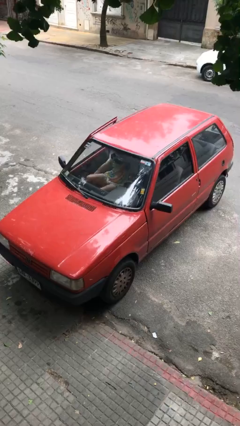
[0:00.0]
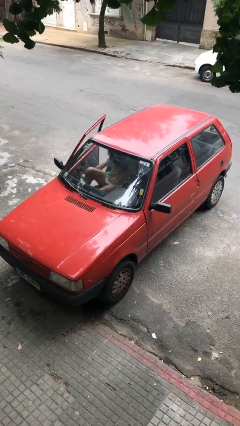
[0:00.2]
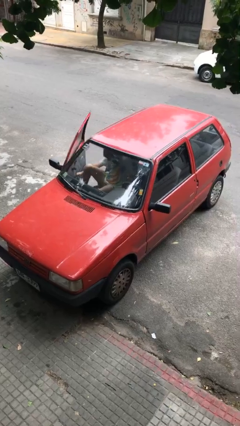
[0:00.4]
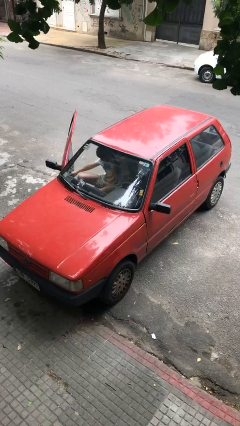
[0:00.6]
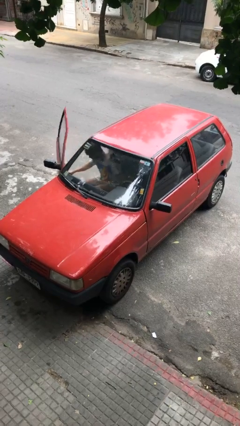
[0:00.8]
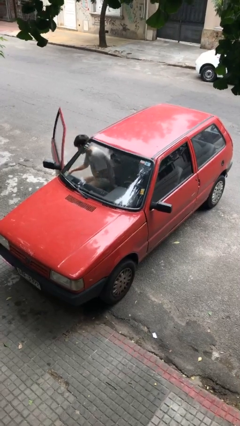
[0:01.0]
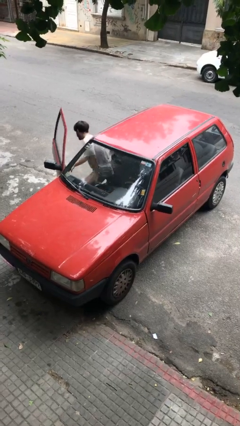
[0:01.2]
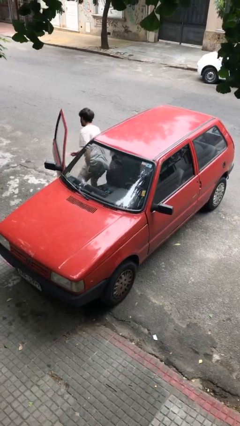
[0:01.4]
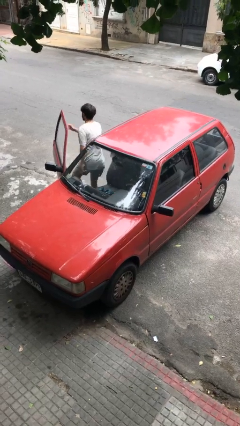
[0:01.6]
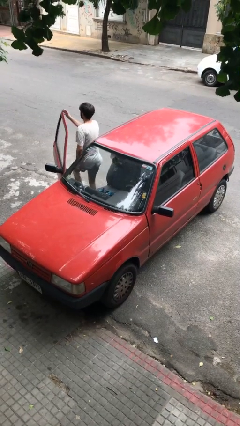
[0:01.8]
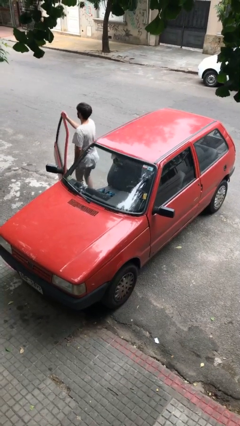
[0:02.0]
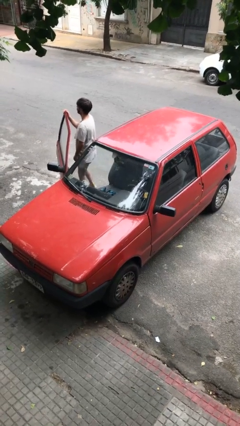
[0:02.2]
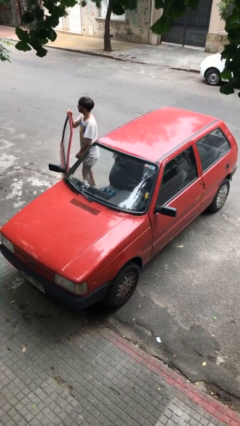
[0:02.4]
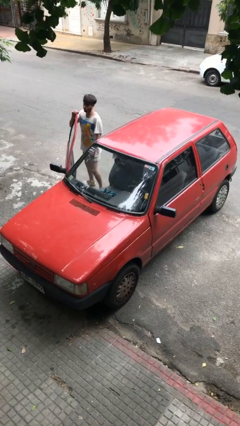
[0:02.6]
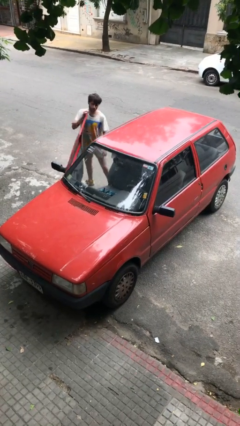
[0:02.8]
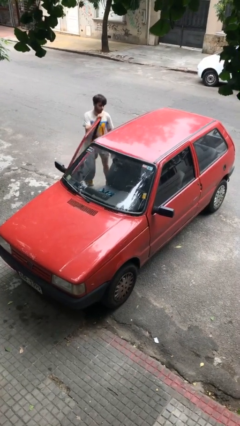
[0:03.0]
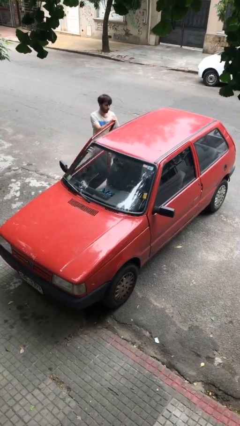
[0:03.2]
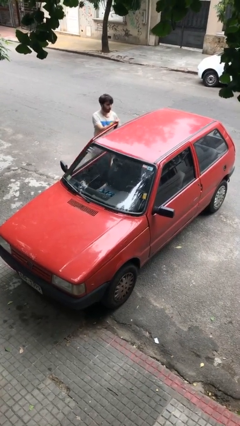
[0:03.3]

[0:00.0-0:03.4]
car drops off person

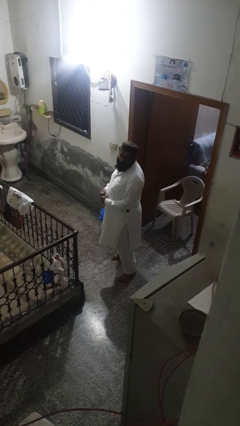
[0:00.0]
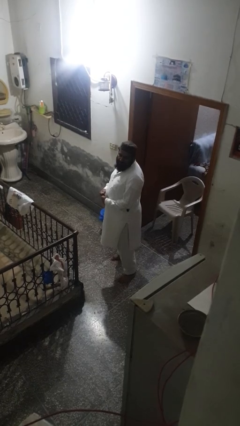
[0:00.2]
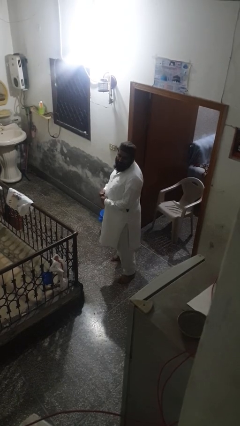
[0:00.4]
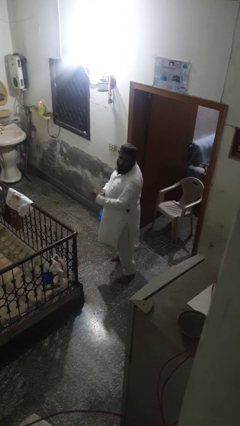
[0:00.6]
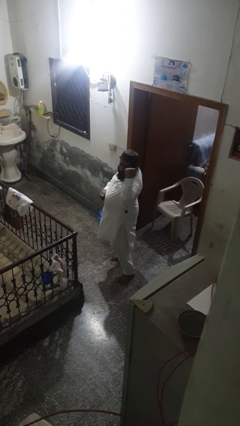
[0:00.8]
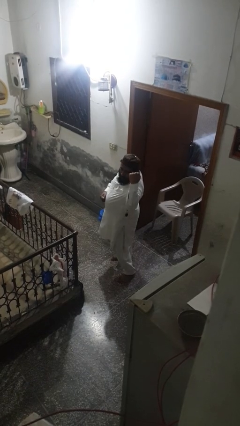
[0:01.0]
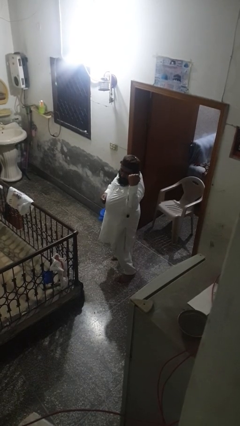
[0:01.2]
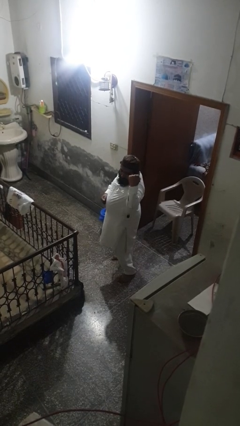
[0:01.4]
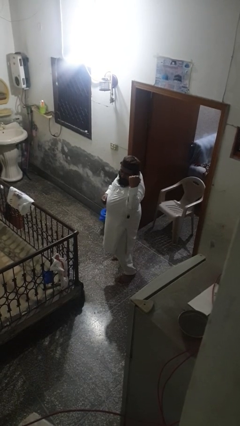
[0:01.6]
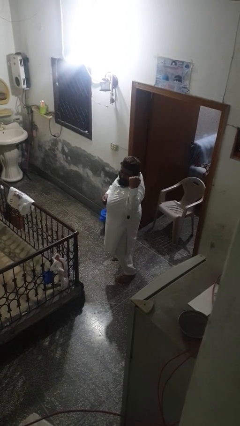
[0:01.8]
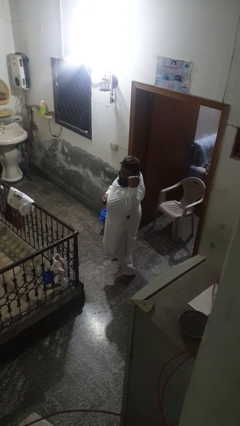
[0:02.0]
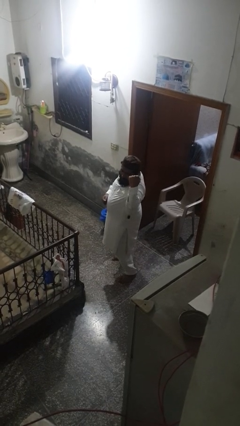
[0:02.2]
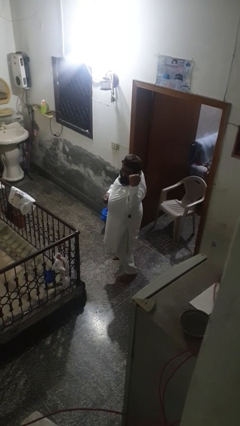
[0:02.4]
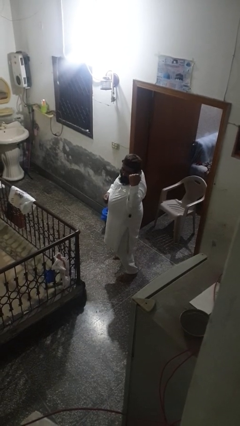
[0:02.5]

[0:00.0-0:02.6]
person karate chop

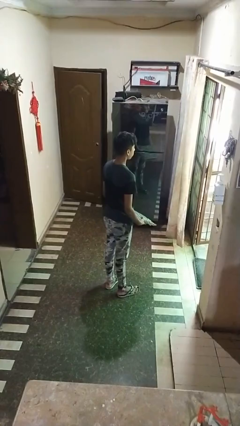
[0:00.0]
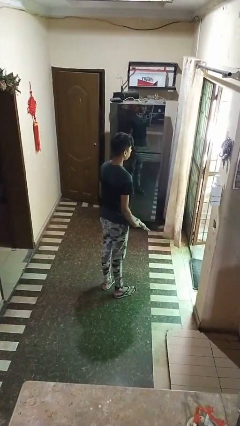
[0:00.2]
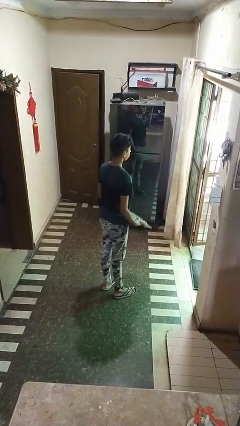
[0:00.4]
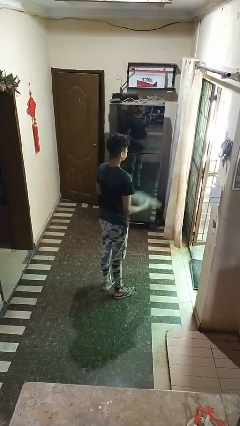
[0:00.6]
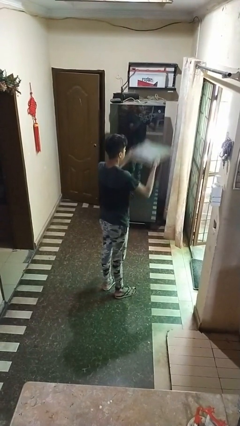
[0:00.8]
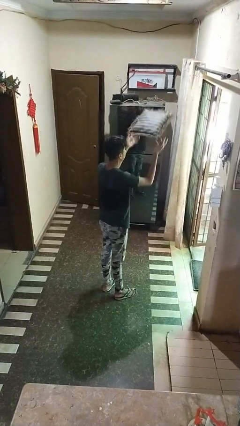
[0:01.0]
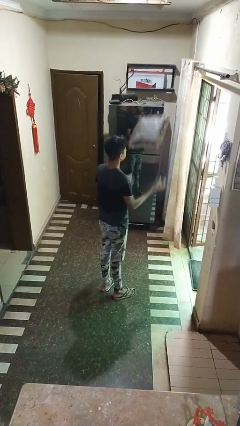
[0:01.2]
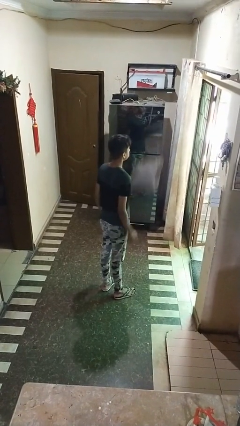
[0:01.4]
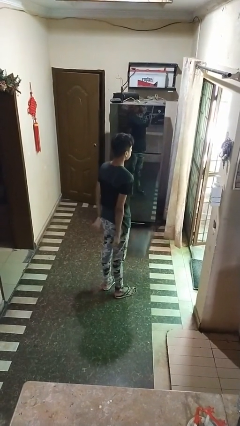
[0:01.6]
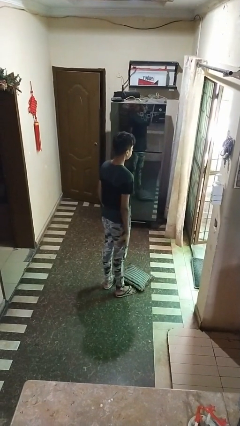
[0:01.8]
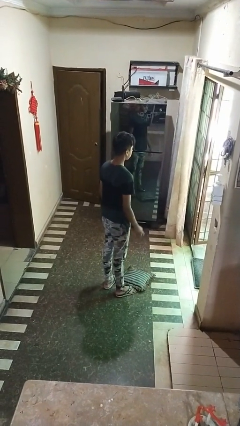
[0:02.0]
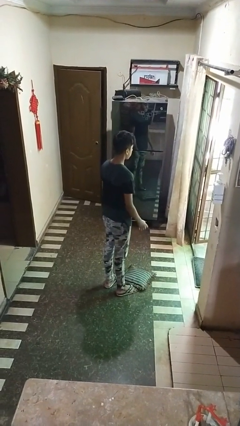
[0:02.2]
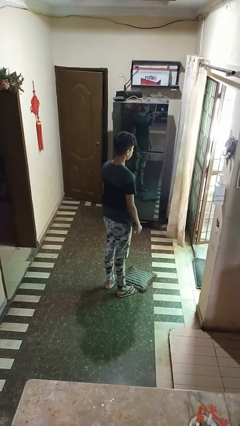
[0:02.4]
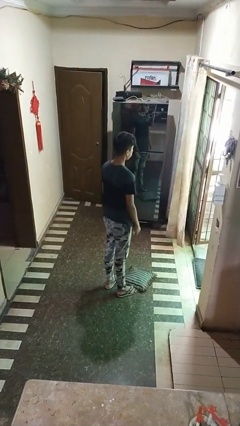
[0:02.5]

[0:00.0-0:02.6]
person throws object into air

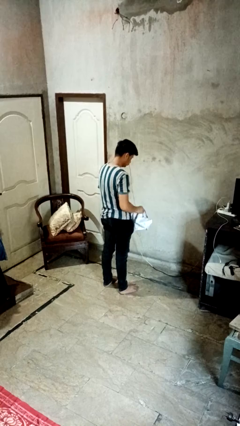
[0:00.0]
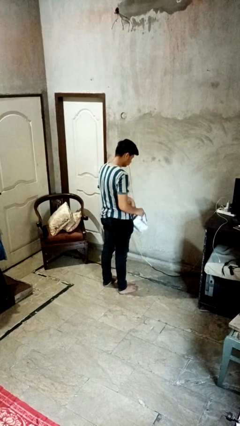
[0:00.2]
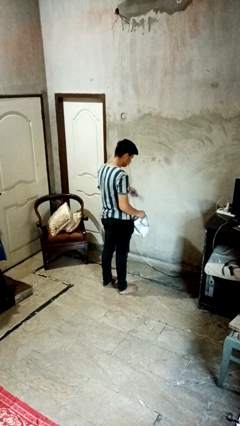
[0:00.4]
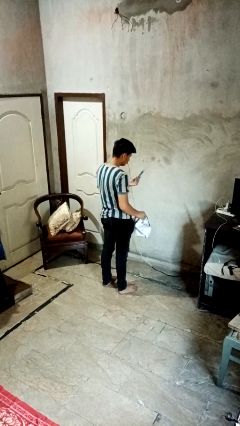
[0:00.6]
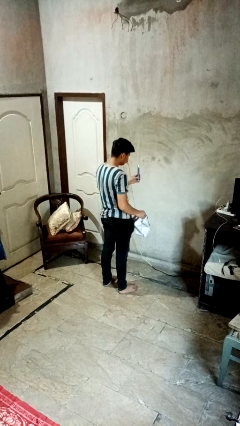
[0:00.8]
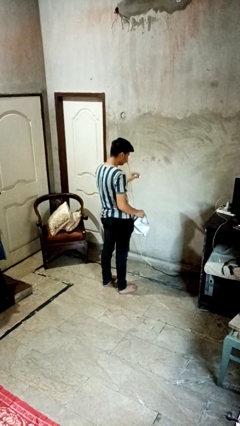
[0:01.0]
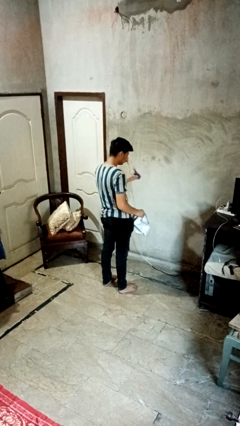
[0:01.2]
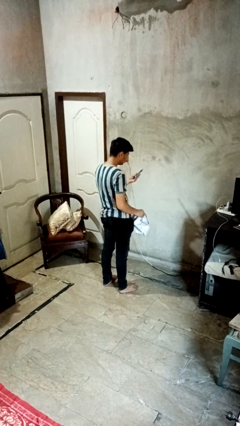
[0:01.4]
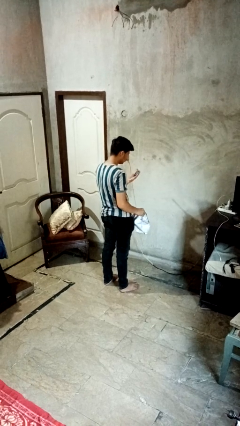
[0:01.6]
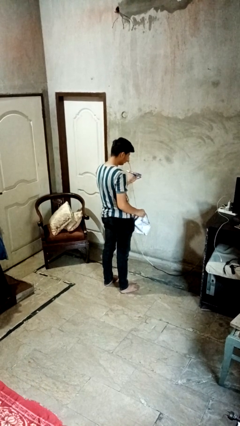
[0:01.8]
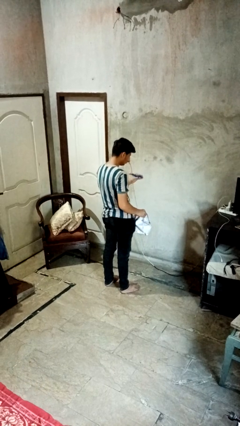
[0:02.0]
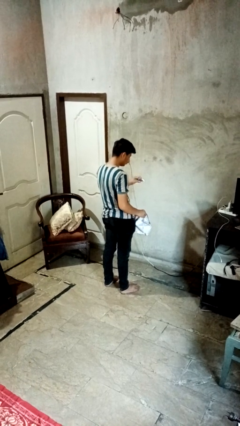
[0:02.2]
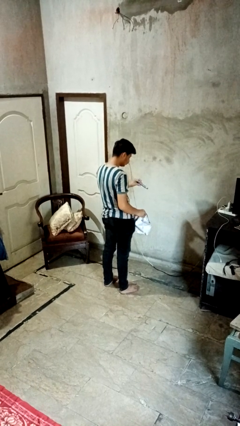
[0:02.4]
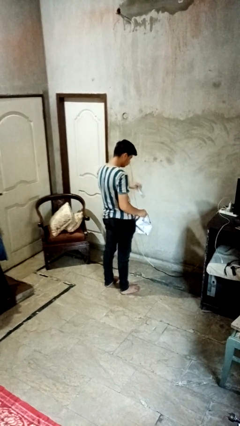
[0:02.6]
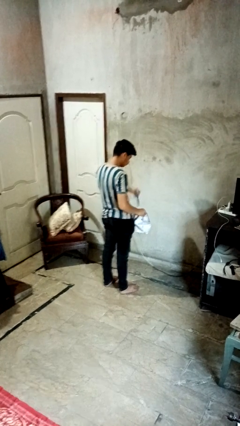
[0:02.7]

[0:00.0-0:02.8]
person searches in bag

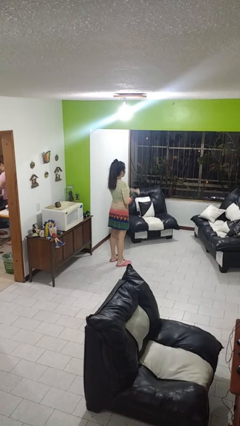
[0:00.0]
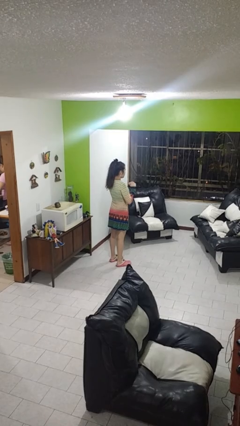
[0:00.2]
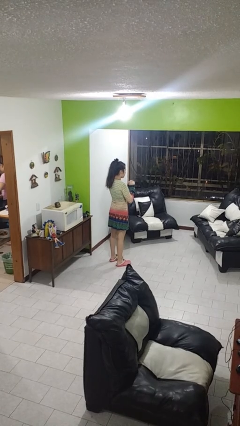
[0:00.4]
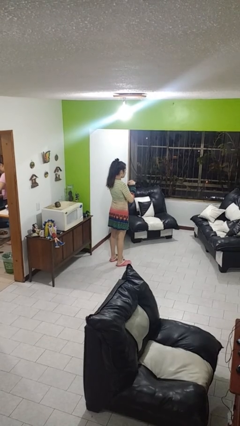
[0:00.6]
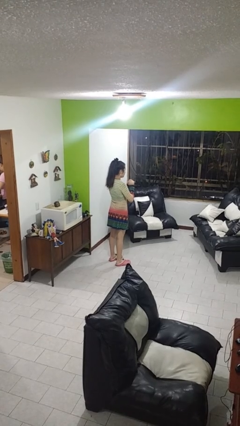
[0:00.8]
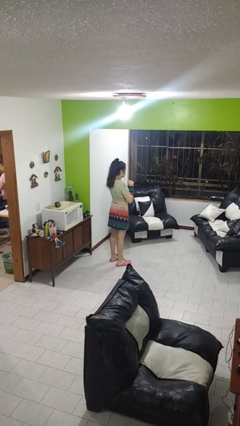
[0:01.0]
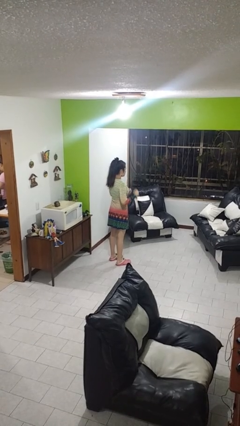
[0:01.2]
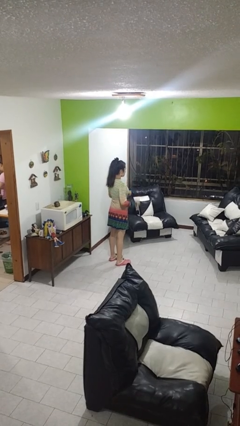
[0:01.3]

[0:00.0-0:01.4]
person files fingernails

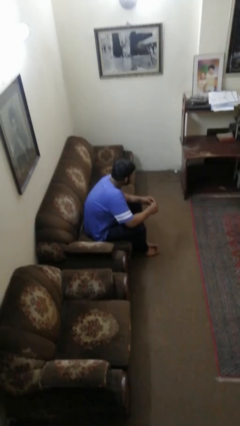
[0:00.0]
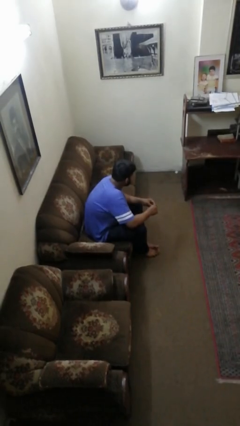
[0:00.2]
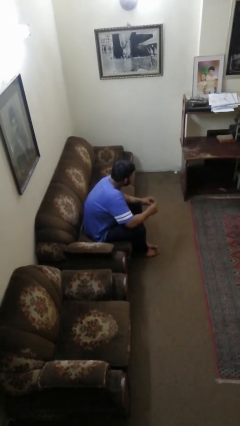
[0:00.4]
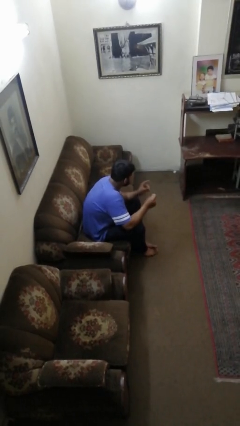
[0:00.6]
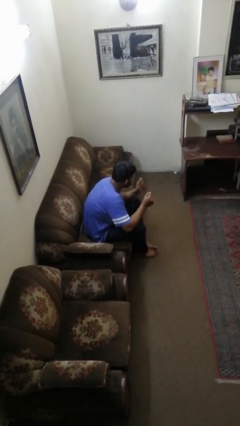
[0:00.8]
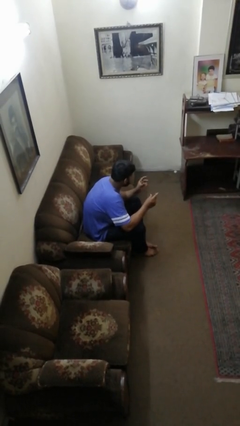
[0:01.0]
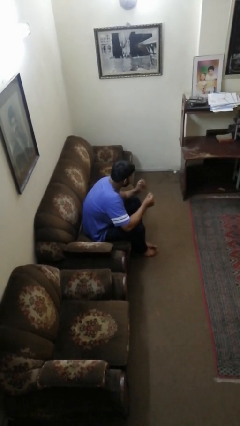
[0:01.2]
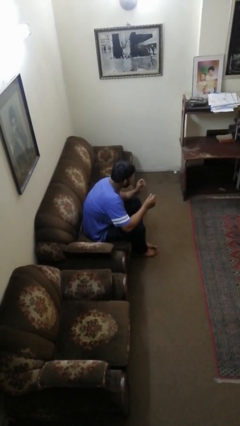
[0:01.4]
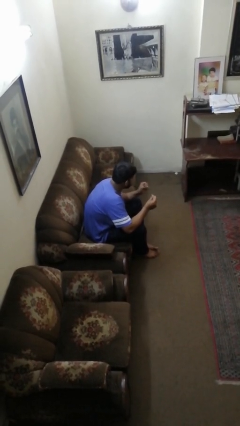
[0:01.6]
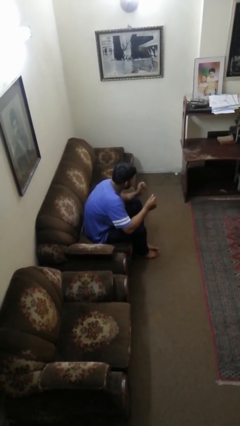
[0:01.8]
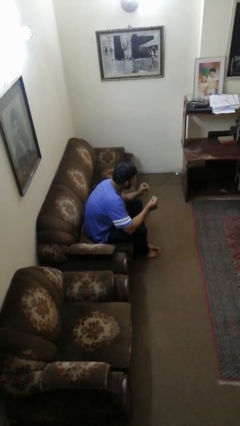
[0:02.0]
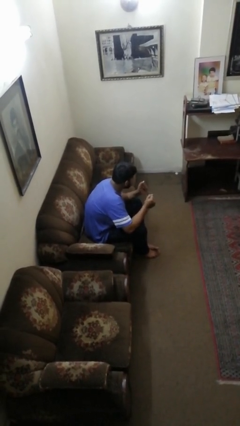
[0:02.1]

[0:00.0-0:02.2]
person snaps fingers

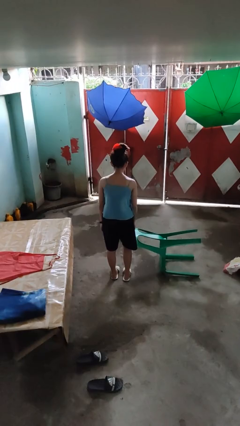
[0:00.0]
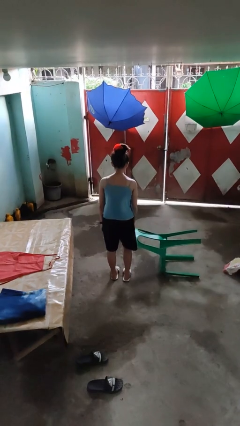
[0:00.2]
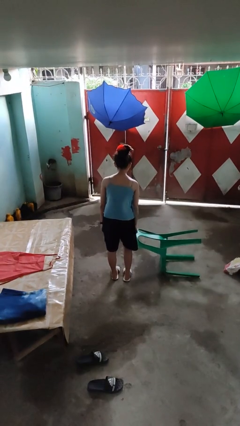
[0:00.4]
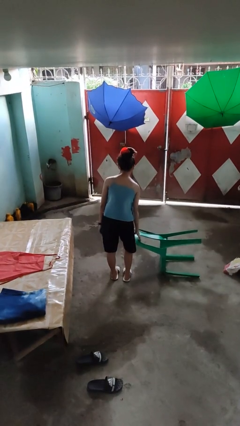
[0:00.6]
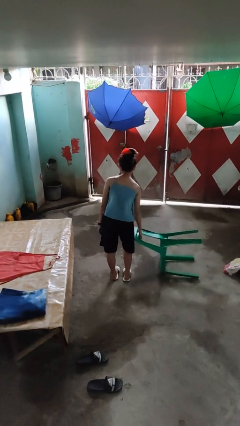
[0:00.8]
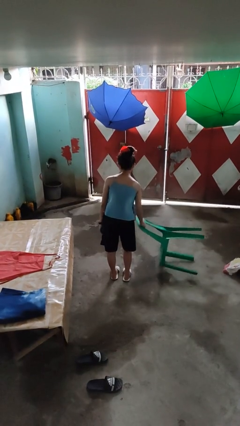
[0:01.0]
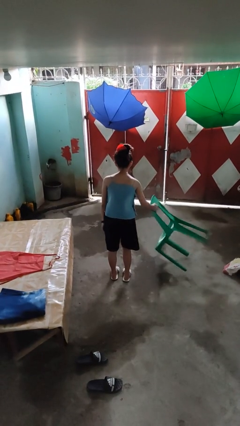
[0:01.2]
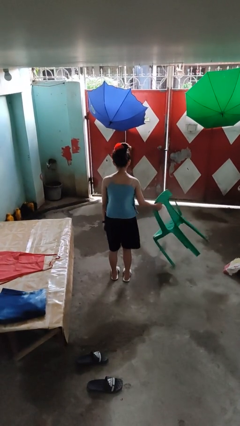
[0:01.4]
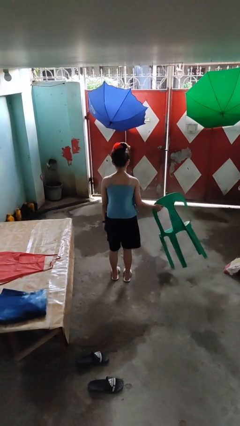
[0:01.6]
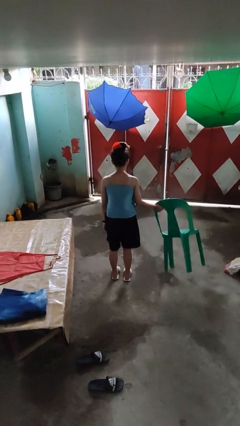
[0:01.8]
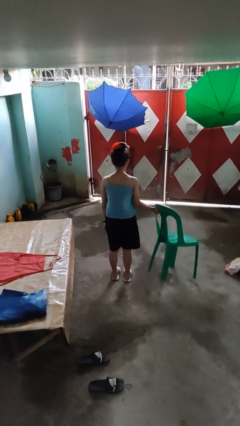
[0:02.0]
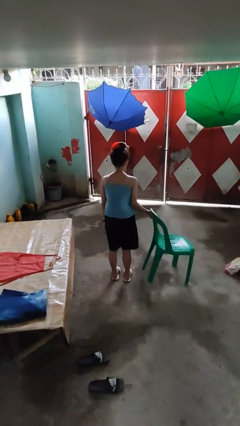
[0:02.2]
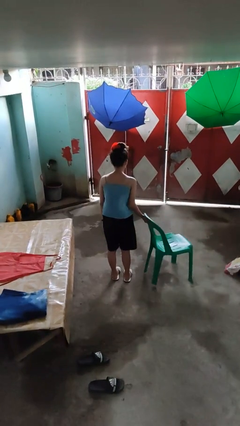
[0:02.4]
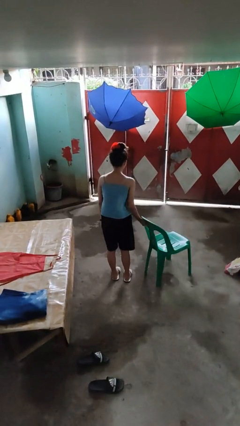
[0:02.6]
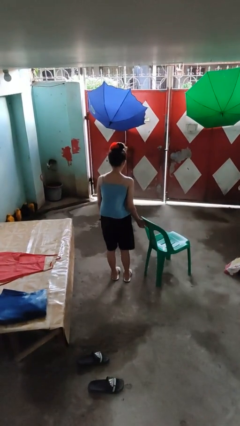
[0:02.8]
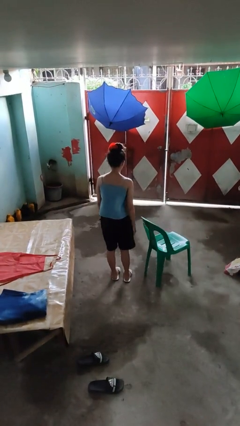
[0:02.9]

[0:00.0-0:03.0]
person sets upright furniture
